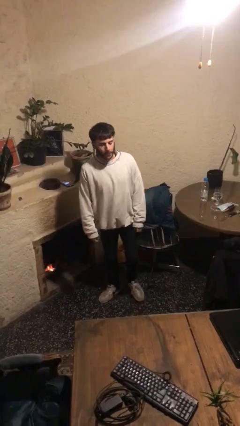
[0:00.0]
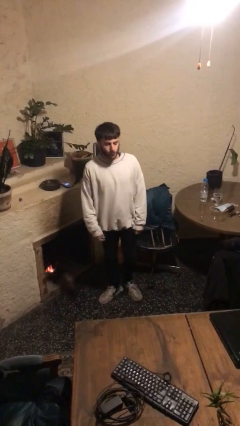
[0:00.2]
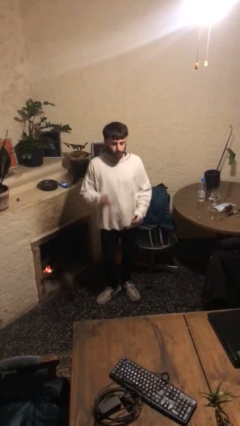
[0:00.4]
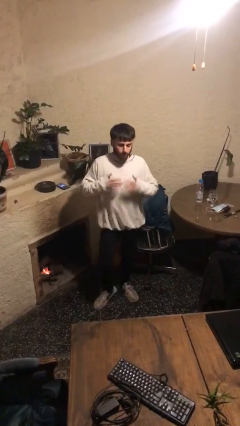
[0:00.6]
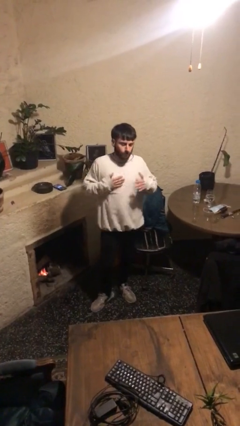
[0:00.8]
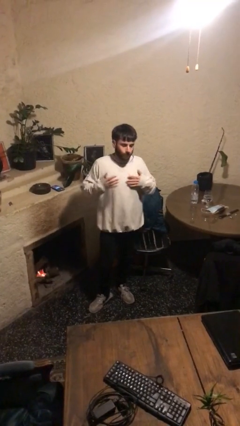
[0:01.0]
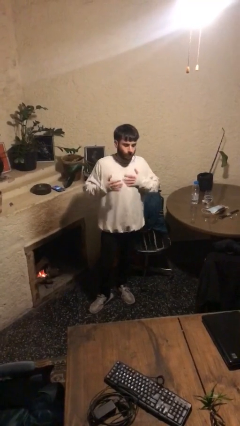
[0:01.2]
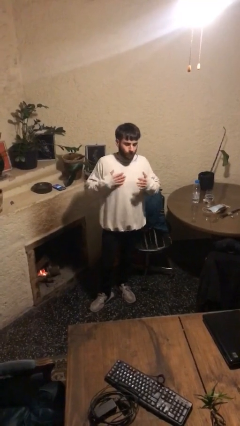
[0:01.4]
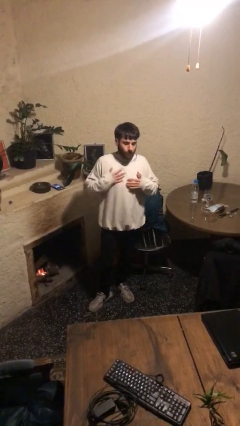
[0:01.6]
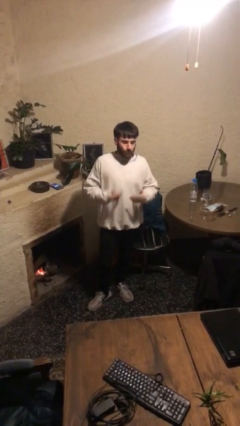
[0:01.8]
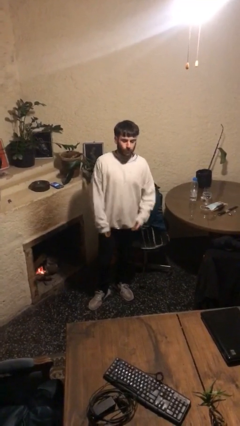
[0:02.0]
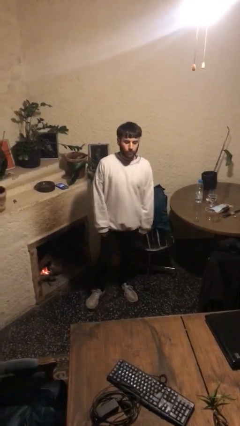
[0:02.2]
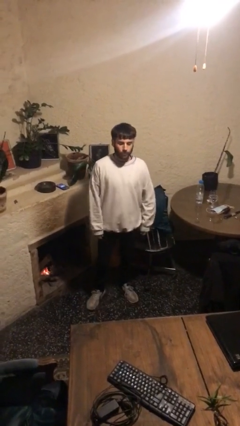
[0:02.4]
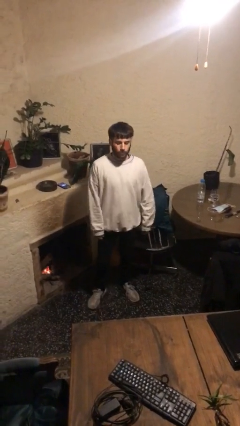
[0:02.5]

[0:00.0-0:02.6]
person drums on chest

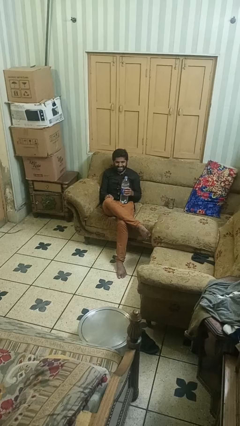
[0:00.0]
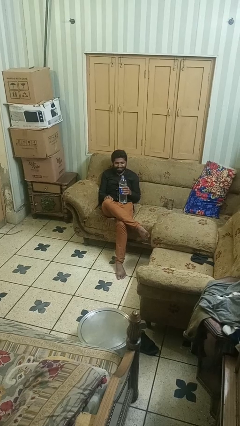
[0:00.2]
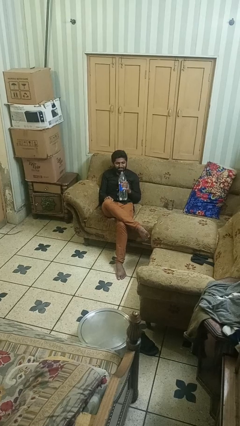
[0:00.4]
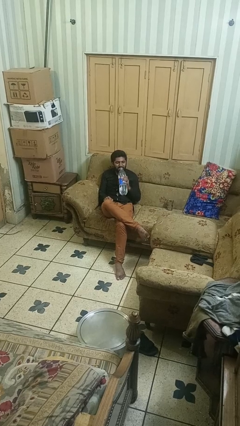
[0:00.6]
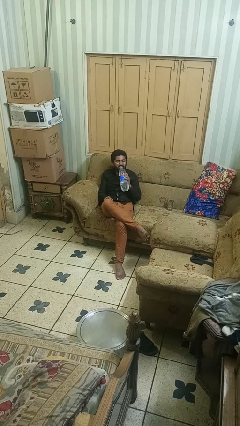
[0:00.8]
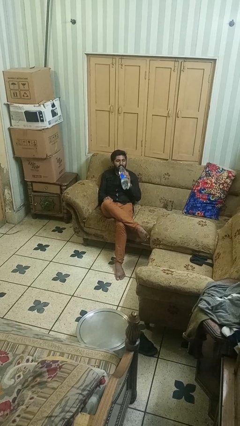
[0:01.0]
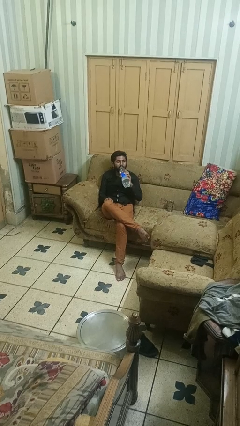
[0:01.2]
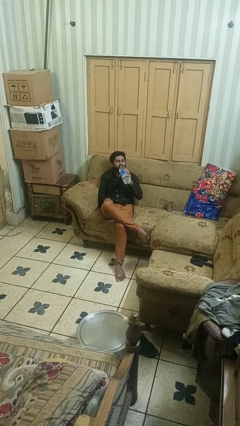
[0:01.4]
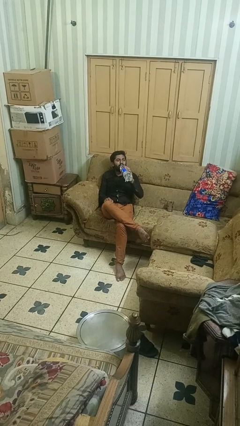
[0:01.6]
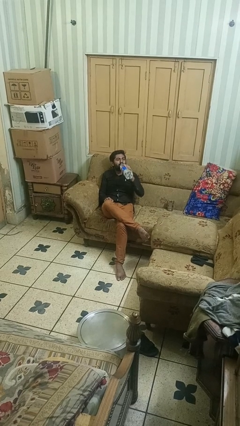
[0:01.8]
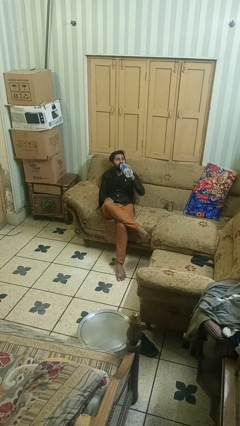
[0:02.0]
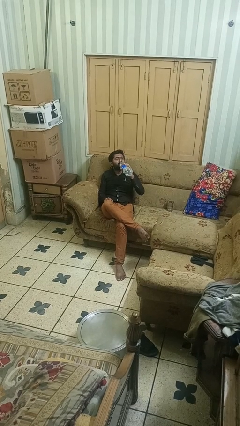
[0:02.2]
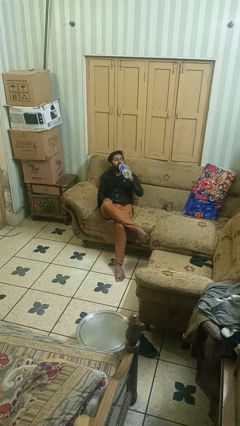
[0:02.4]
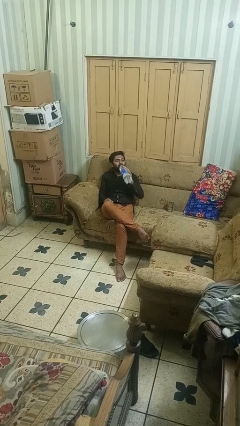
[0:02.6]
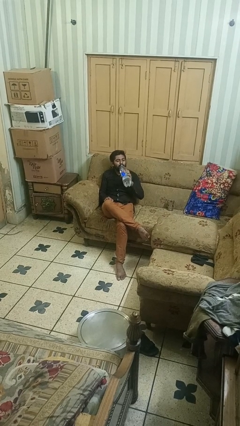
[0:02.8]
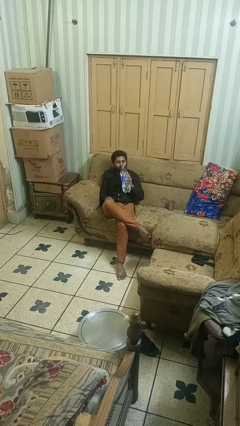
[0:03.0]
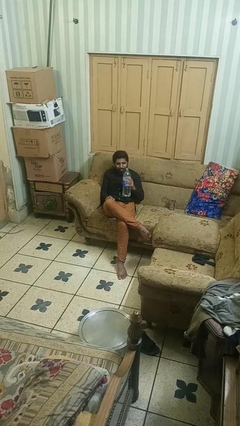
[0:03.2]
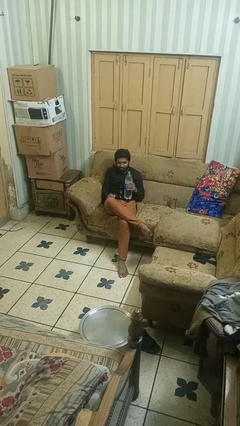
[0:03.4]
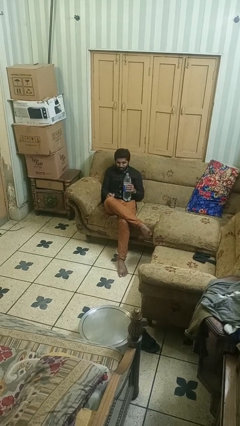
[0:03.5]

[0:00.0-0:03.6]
person drinks from bottle

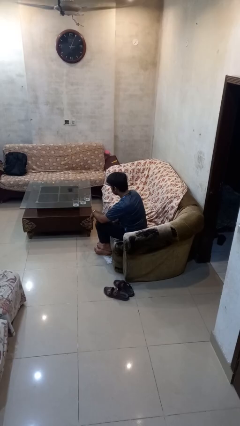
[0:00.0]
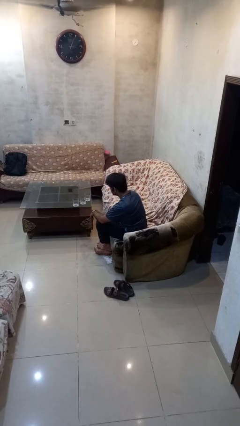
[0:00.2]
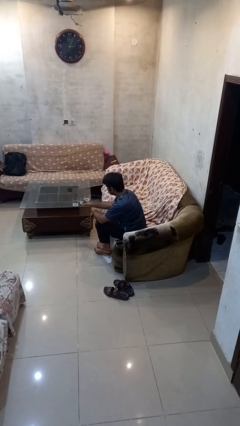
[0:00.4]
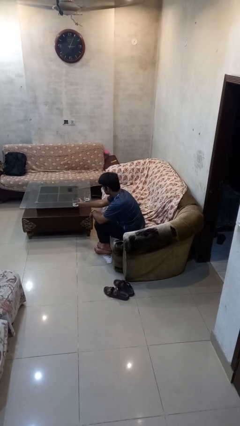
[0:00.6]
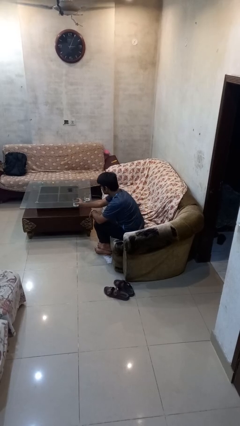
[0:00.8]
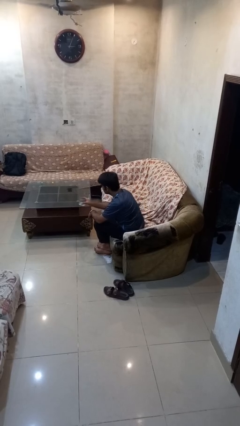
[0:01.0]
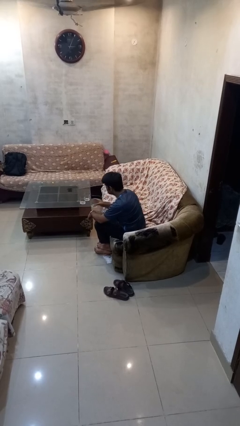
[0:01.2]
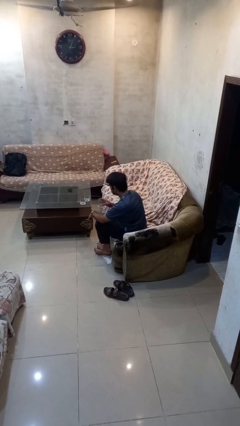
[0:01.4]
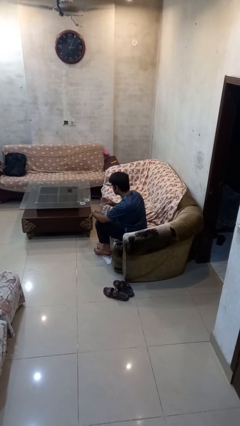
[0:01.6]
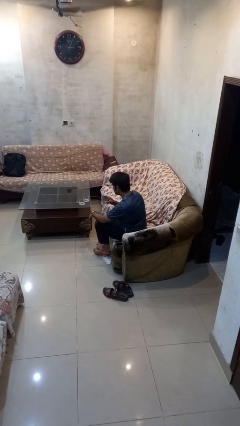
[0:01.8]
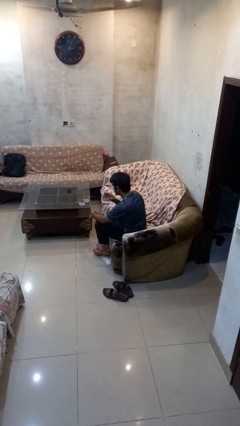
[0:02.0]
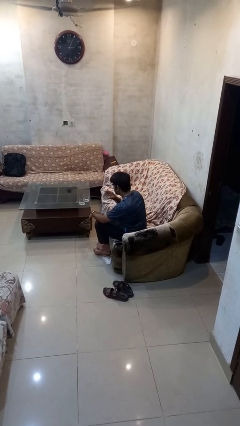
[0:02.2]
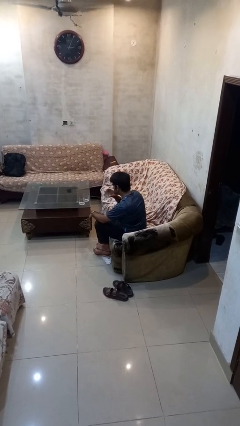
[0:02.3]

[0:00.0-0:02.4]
person picks up object from table

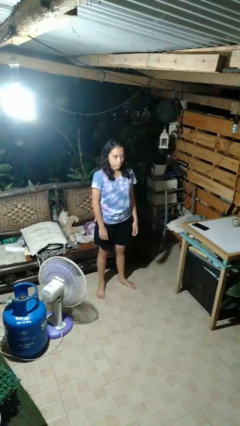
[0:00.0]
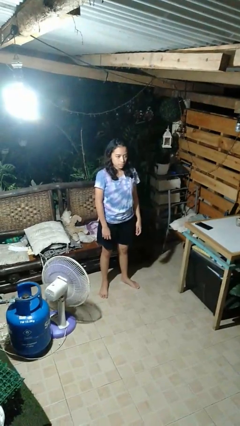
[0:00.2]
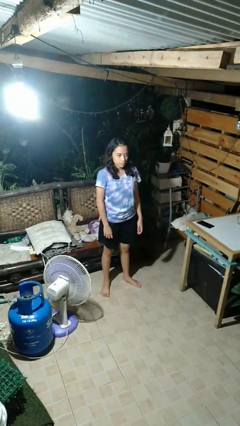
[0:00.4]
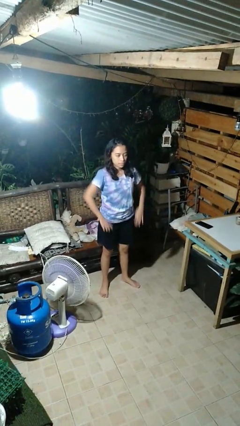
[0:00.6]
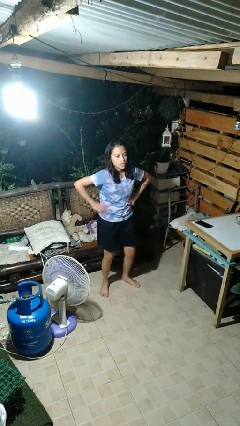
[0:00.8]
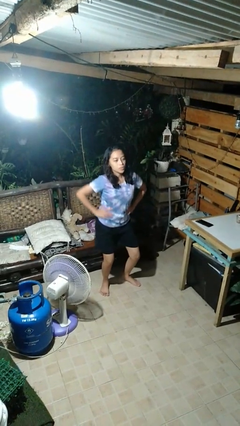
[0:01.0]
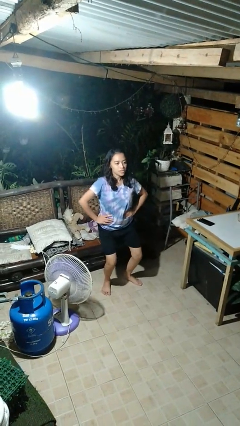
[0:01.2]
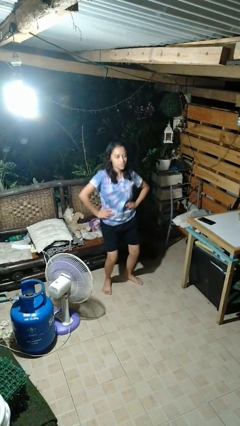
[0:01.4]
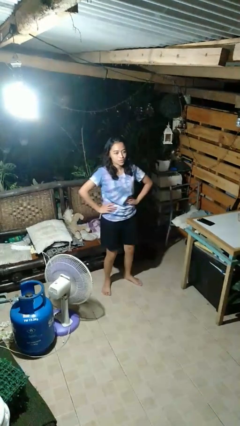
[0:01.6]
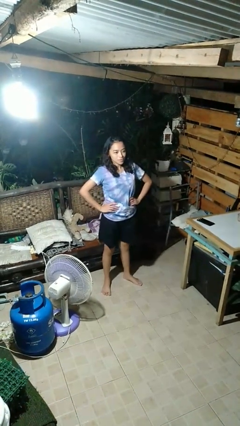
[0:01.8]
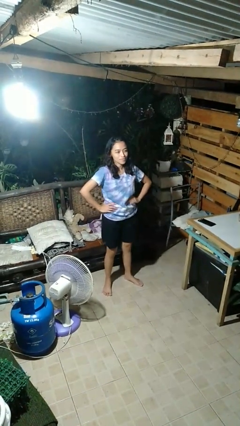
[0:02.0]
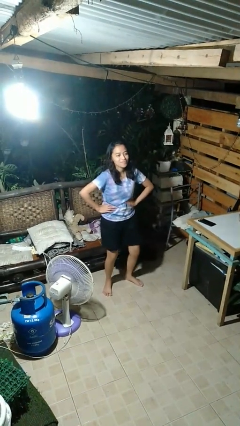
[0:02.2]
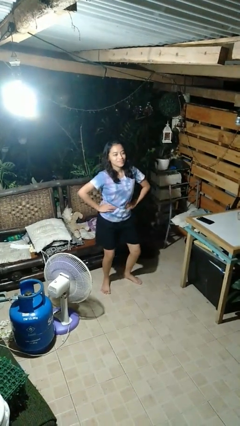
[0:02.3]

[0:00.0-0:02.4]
person dances in place

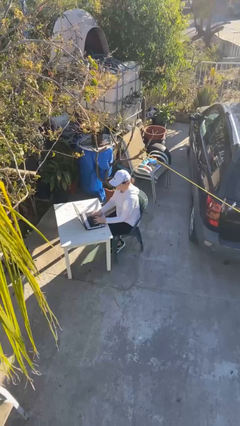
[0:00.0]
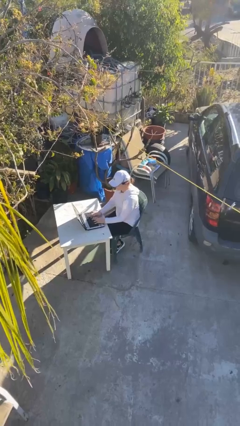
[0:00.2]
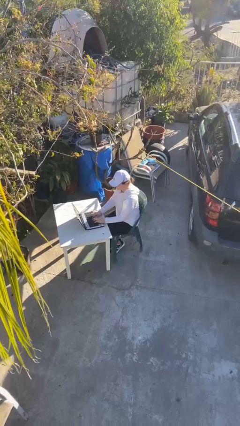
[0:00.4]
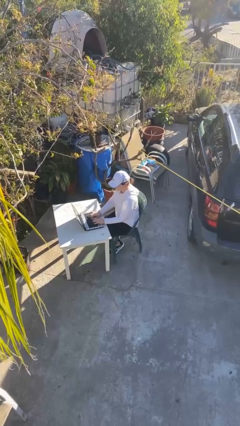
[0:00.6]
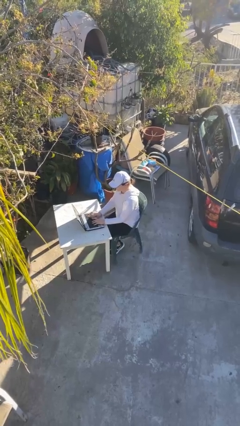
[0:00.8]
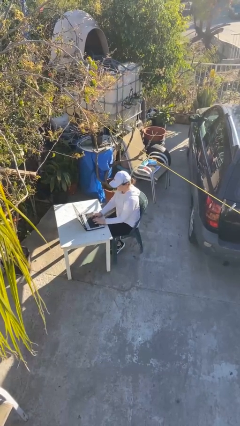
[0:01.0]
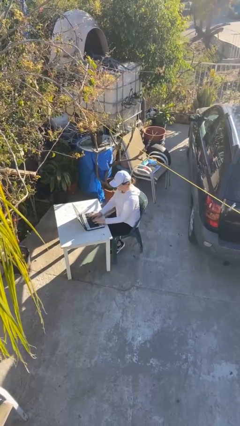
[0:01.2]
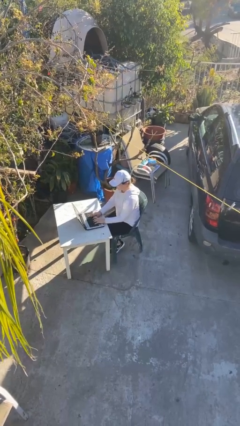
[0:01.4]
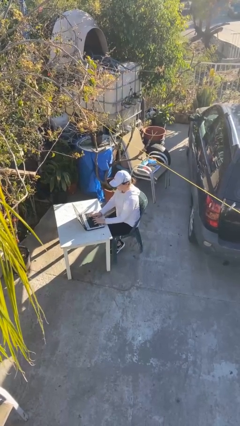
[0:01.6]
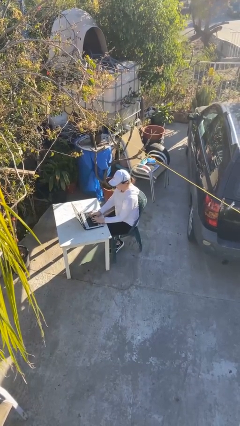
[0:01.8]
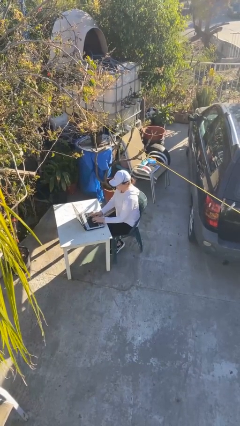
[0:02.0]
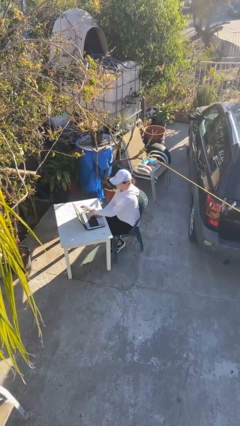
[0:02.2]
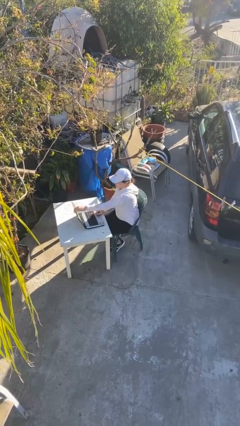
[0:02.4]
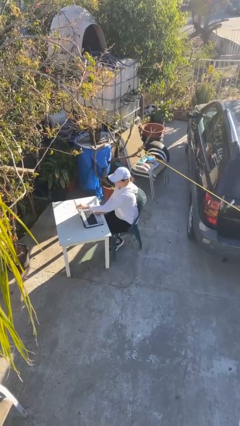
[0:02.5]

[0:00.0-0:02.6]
person interacts with laptop

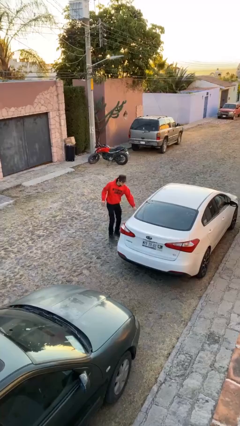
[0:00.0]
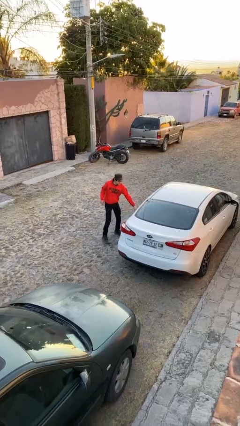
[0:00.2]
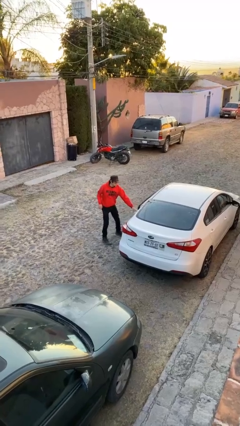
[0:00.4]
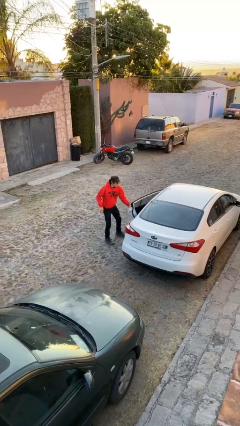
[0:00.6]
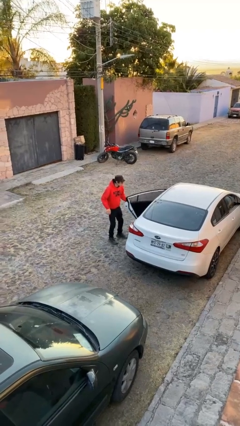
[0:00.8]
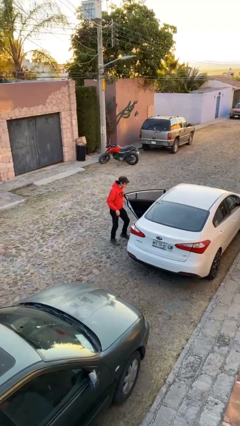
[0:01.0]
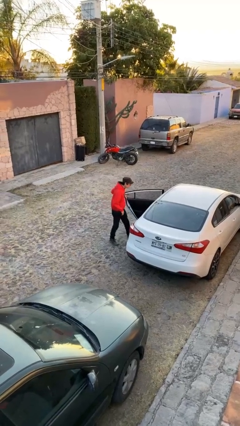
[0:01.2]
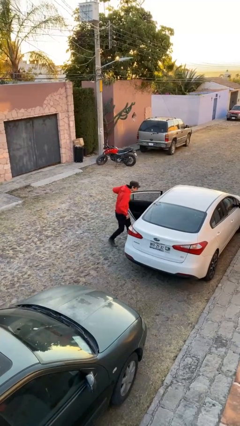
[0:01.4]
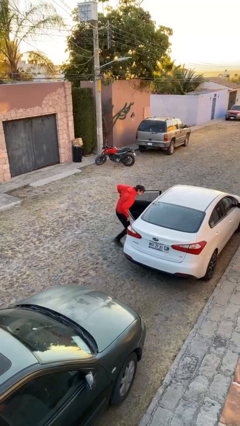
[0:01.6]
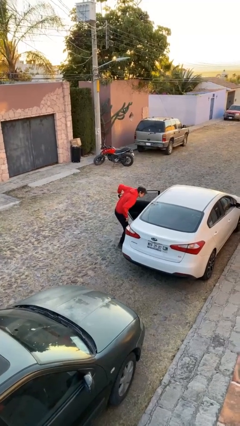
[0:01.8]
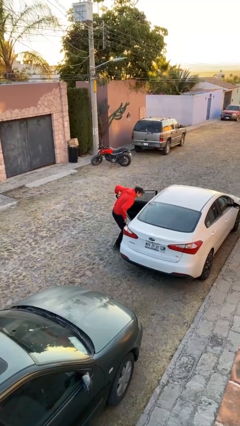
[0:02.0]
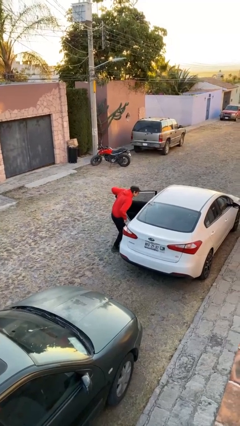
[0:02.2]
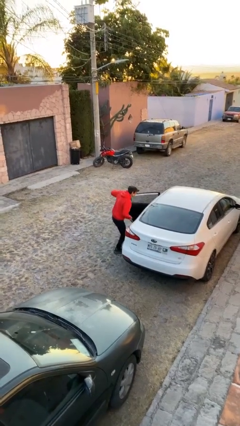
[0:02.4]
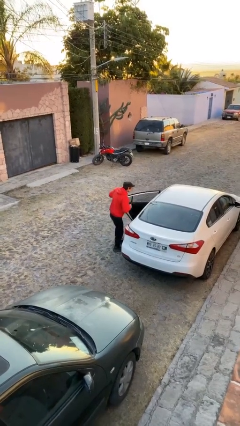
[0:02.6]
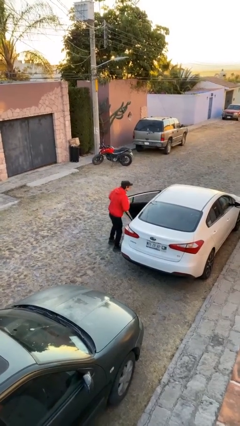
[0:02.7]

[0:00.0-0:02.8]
person opens facility door

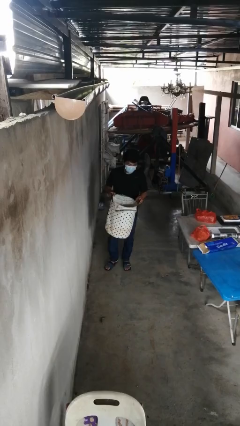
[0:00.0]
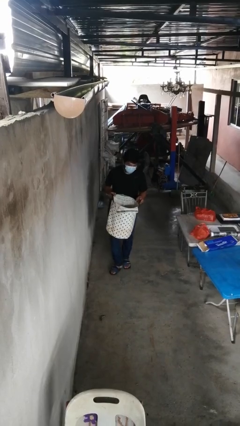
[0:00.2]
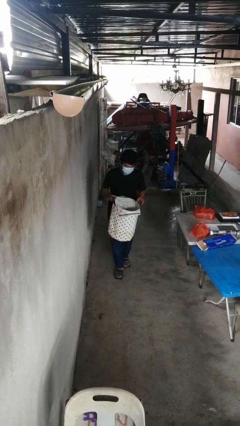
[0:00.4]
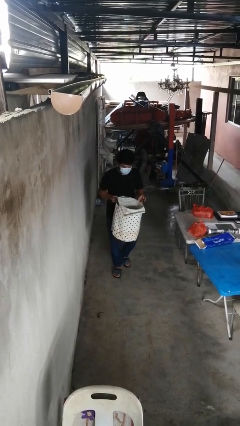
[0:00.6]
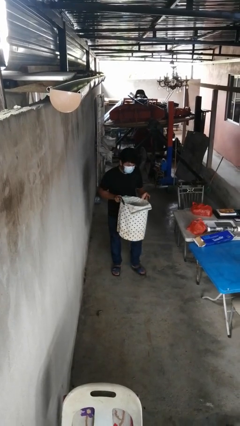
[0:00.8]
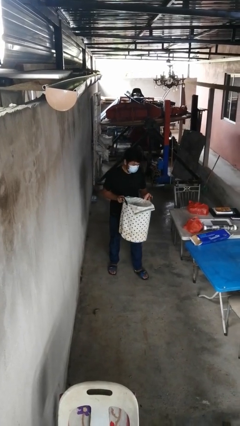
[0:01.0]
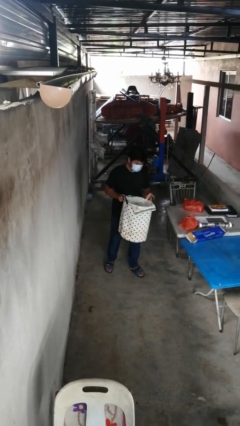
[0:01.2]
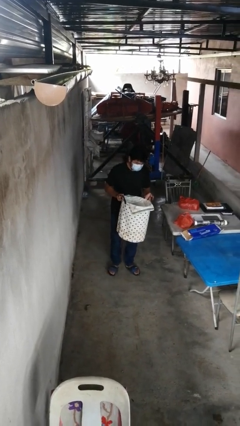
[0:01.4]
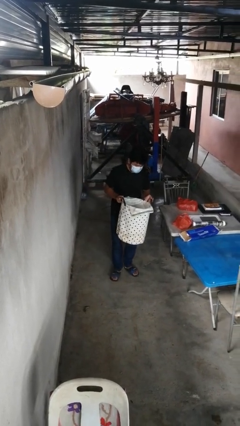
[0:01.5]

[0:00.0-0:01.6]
person carries laundry basket
